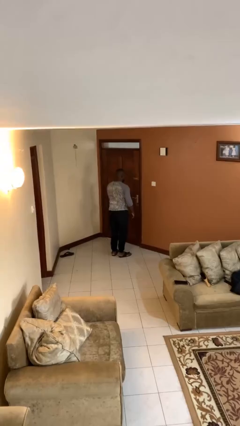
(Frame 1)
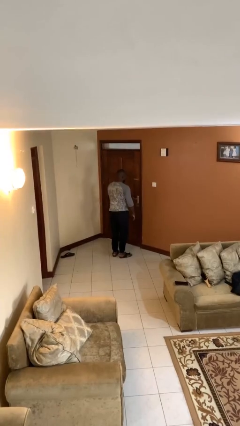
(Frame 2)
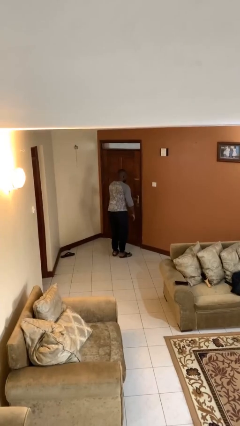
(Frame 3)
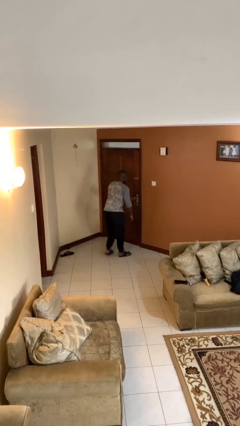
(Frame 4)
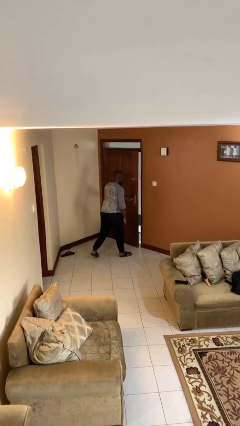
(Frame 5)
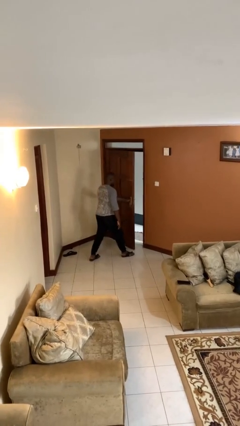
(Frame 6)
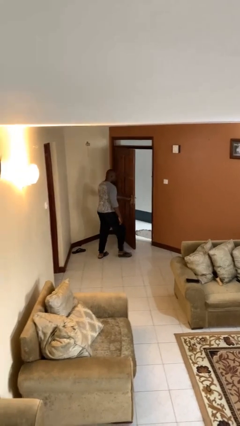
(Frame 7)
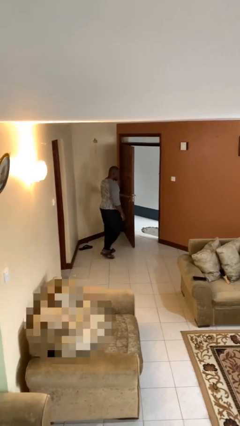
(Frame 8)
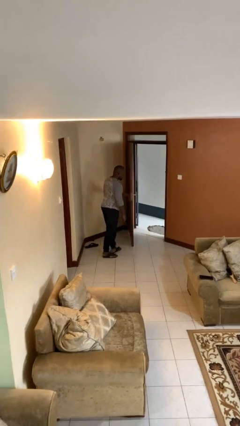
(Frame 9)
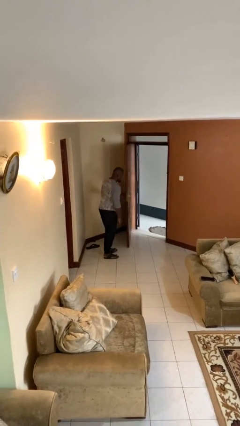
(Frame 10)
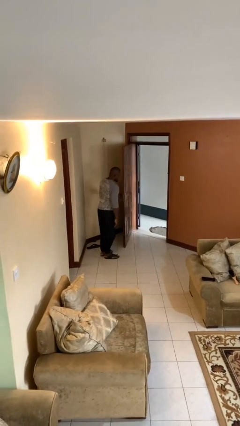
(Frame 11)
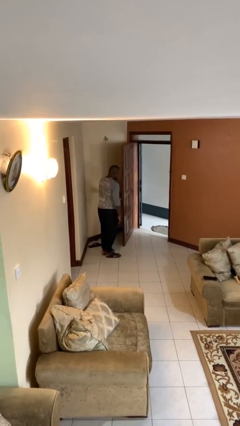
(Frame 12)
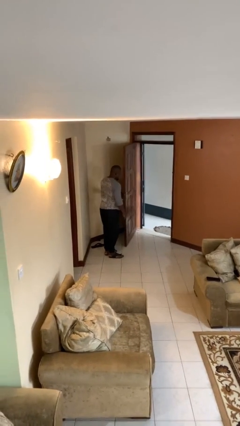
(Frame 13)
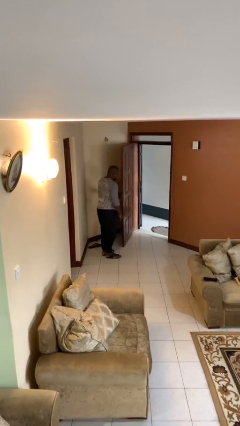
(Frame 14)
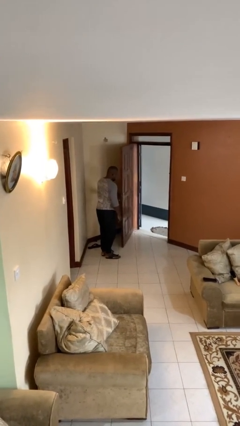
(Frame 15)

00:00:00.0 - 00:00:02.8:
person opens facility door

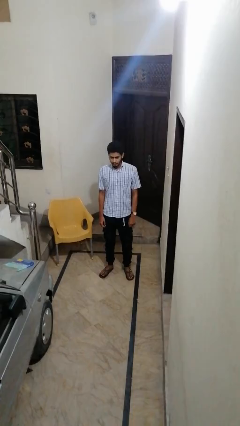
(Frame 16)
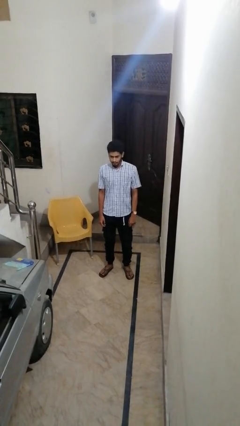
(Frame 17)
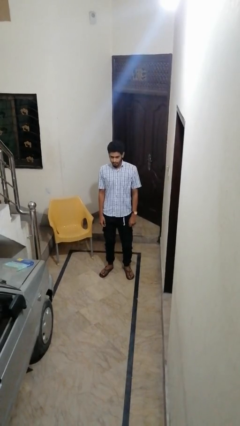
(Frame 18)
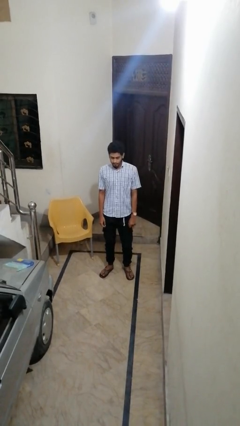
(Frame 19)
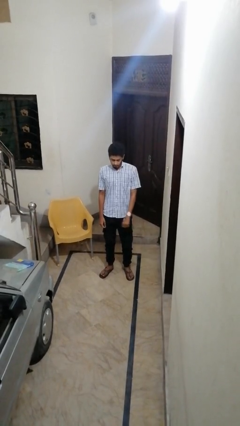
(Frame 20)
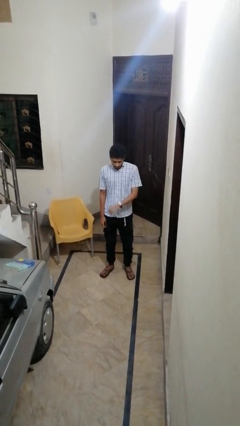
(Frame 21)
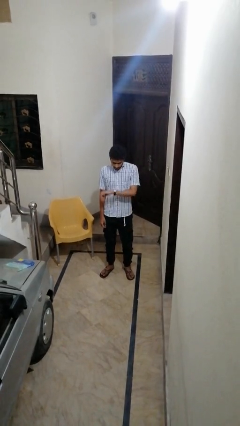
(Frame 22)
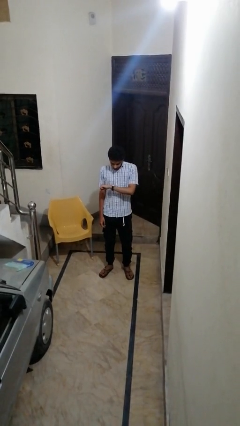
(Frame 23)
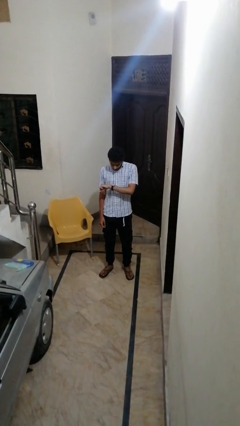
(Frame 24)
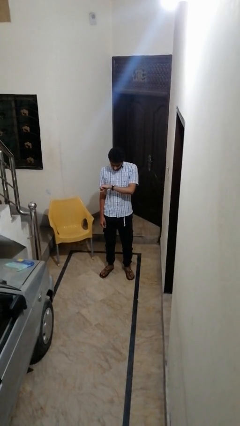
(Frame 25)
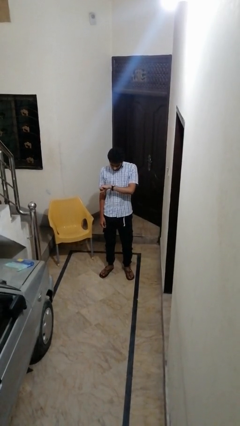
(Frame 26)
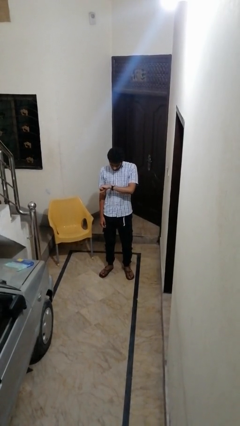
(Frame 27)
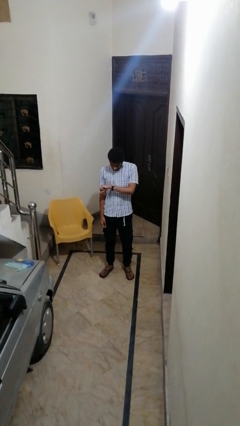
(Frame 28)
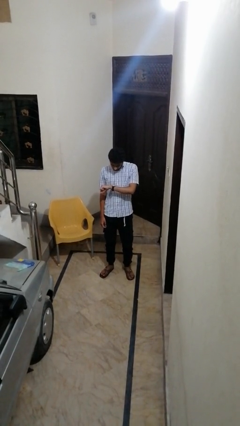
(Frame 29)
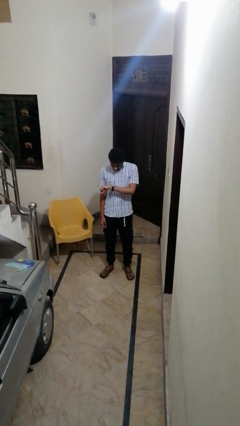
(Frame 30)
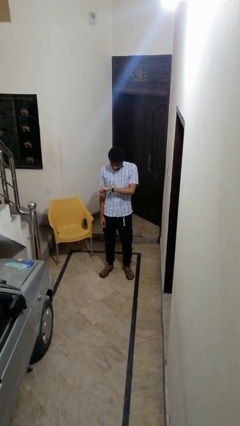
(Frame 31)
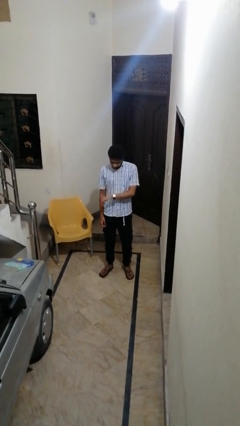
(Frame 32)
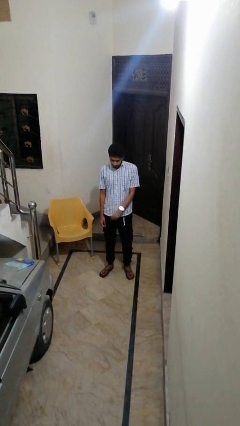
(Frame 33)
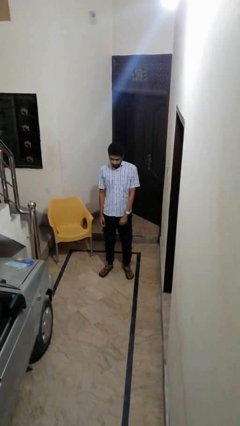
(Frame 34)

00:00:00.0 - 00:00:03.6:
person looks at wristwatch

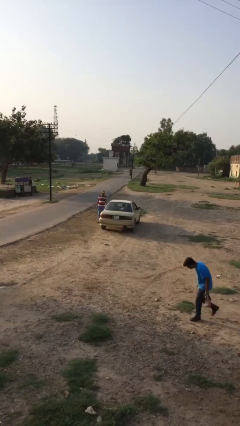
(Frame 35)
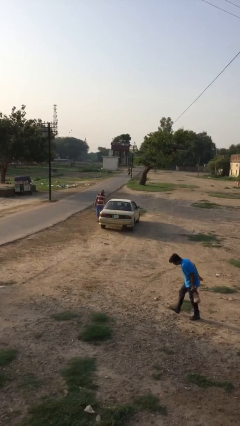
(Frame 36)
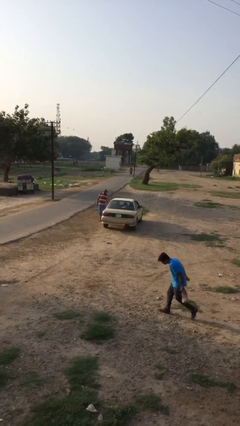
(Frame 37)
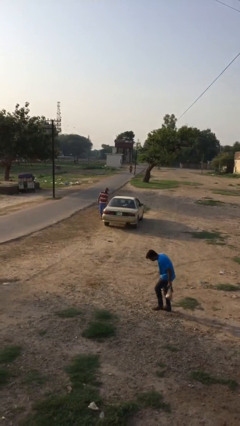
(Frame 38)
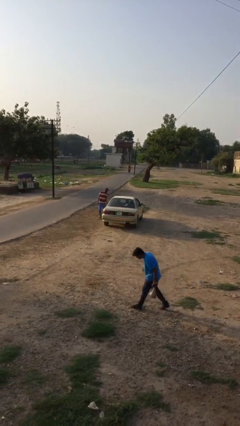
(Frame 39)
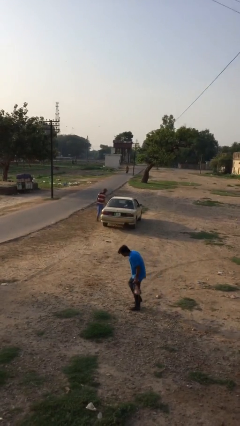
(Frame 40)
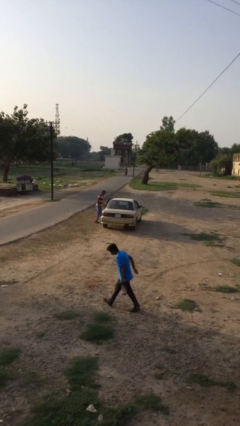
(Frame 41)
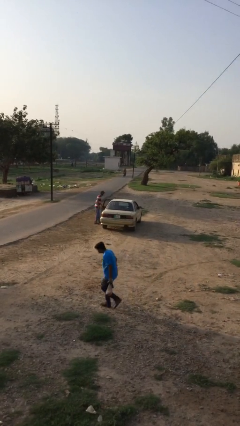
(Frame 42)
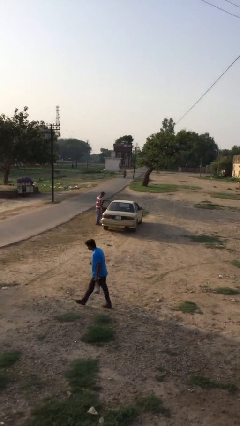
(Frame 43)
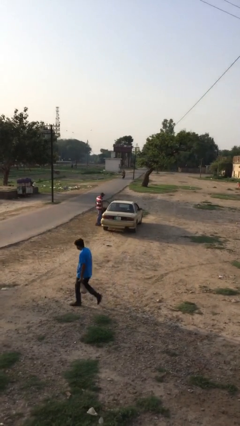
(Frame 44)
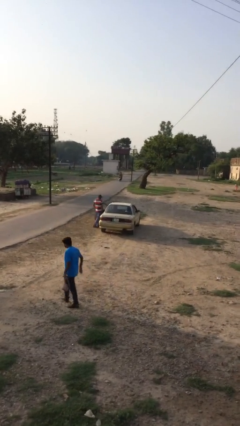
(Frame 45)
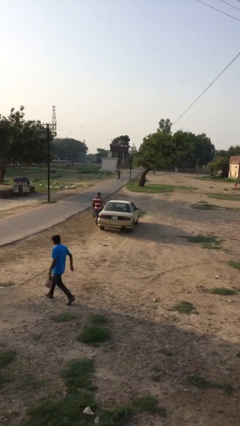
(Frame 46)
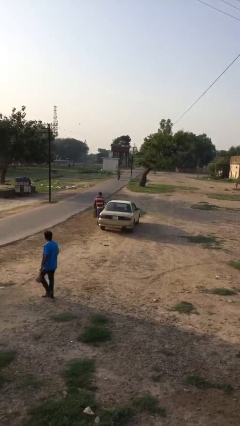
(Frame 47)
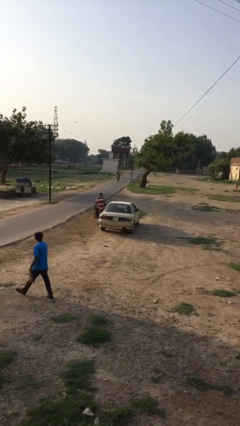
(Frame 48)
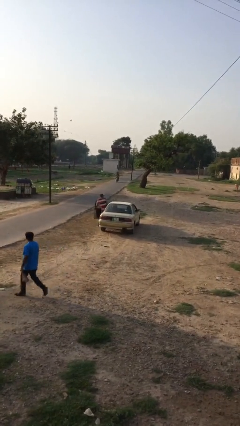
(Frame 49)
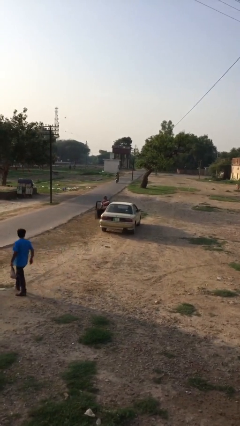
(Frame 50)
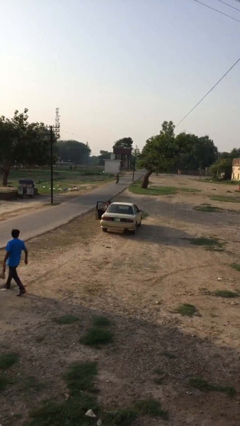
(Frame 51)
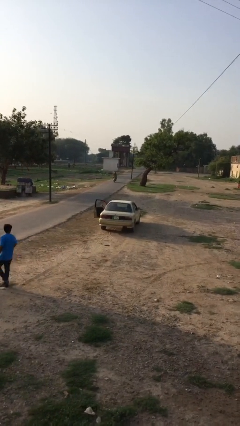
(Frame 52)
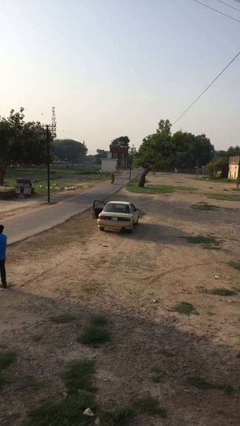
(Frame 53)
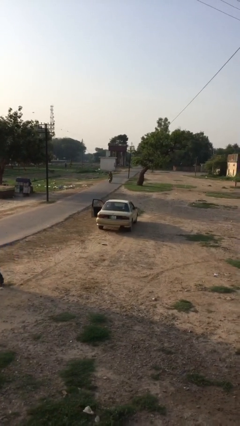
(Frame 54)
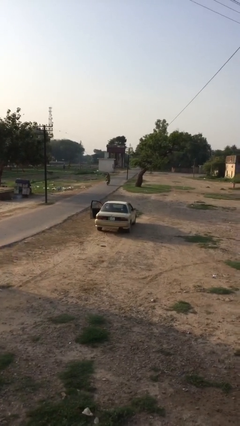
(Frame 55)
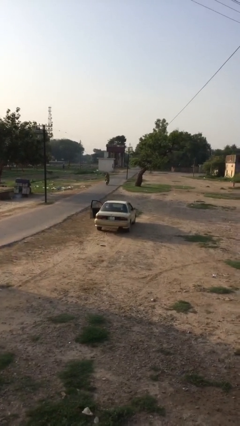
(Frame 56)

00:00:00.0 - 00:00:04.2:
car picks up person

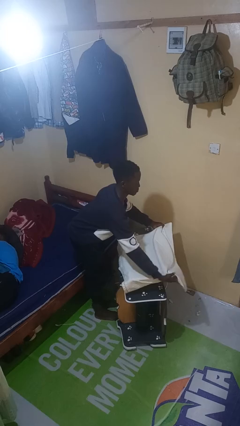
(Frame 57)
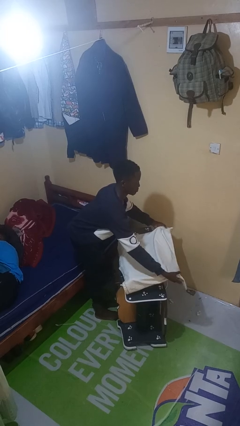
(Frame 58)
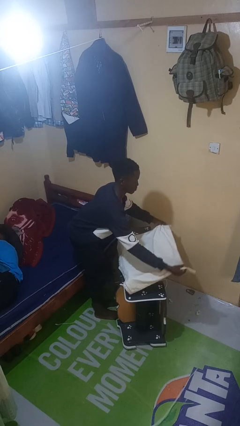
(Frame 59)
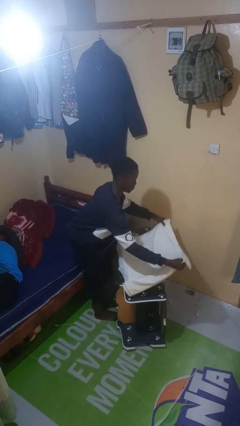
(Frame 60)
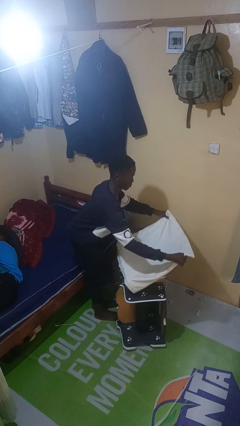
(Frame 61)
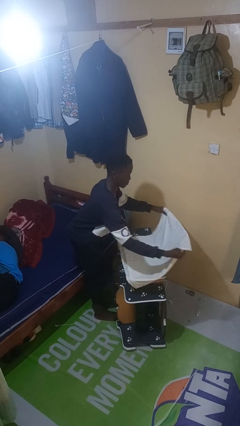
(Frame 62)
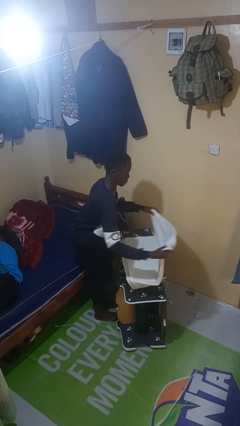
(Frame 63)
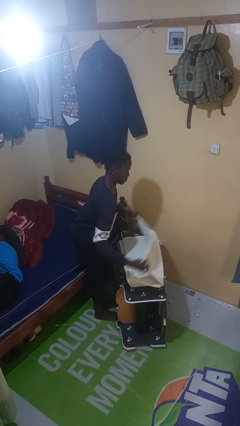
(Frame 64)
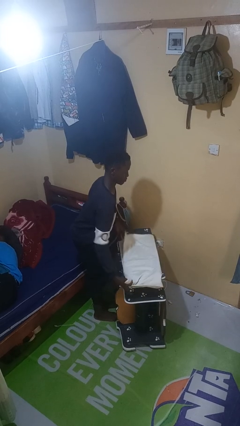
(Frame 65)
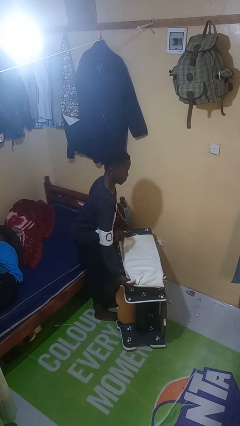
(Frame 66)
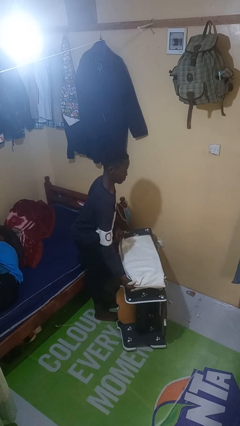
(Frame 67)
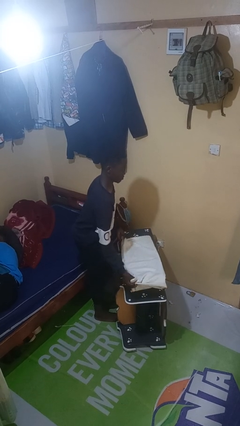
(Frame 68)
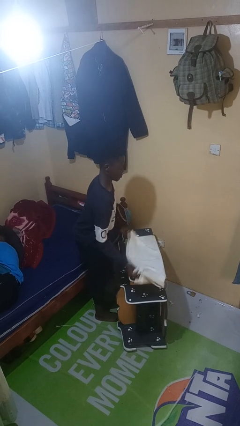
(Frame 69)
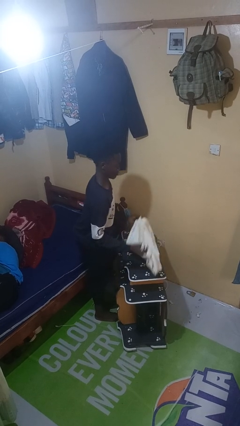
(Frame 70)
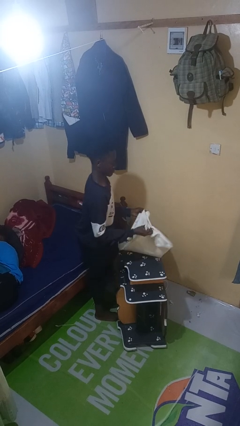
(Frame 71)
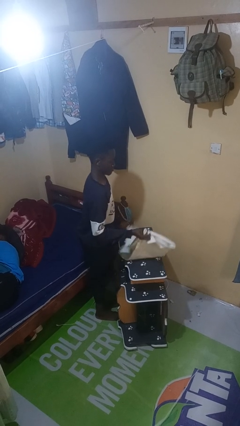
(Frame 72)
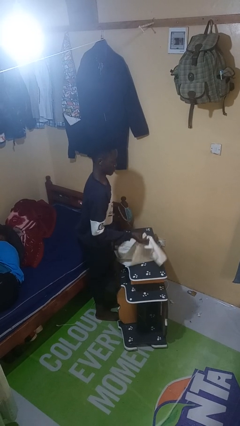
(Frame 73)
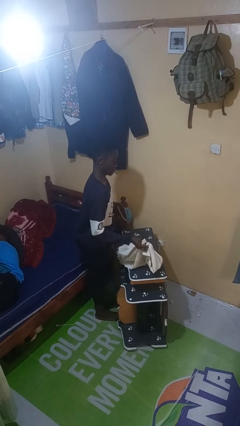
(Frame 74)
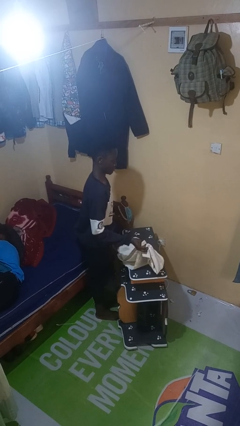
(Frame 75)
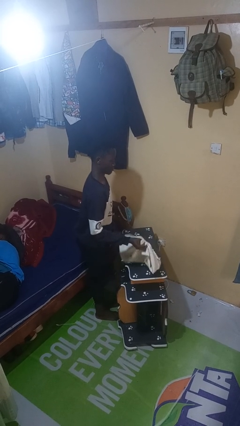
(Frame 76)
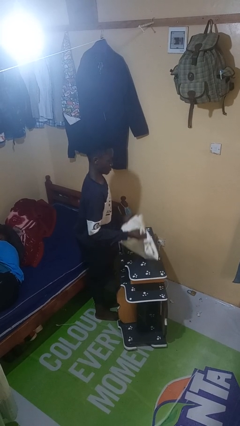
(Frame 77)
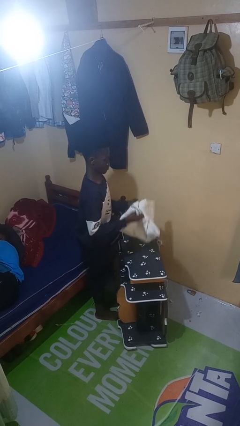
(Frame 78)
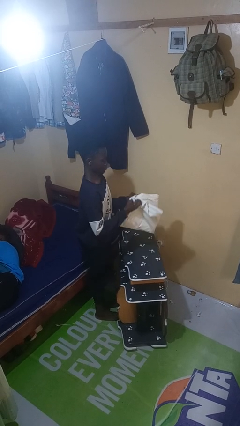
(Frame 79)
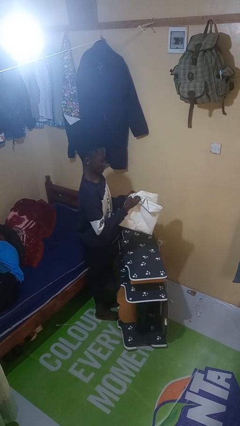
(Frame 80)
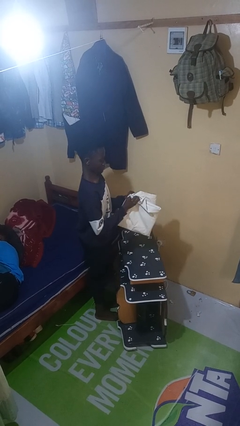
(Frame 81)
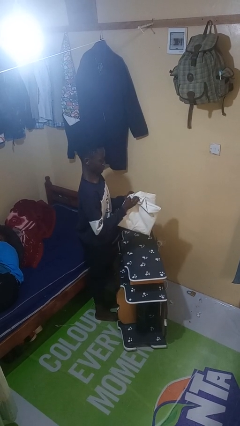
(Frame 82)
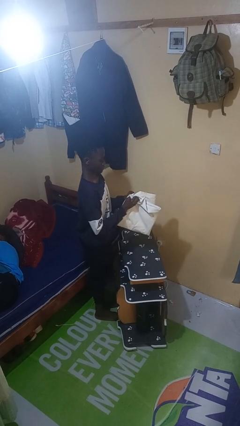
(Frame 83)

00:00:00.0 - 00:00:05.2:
person folds tablecloth

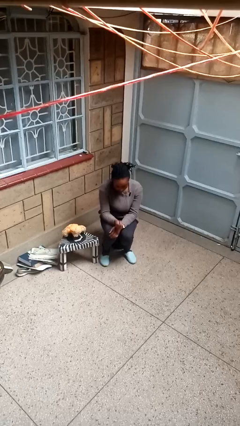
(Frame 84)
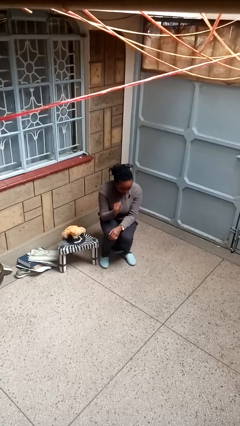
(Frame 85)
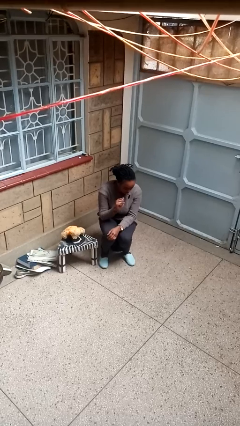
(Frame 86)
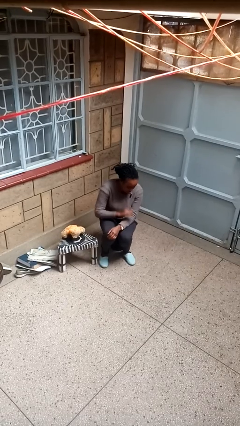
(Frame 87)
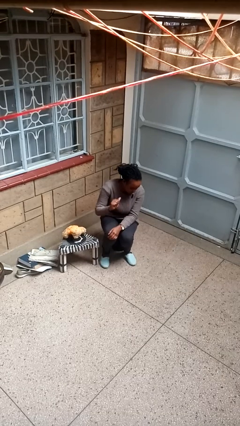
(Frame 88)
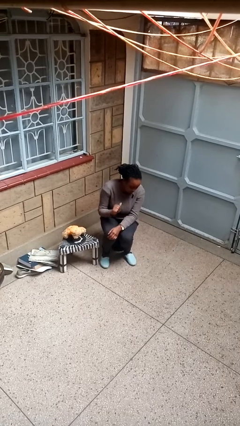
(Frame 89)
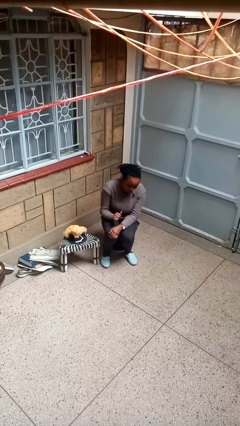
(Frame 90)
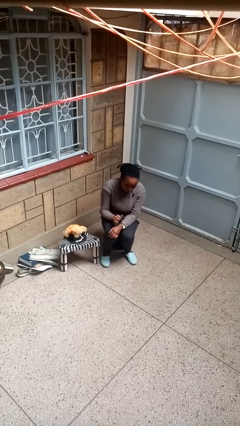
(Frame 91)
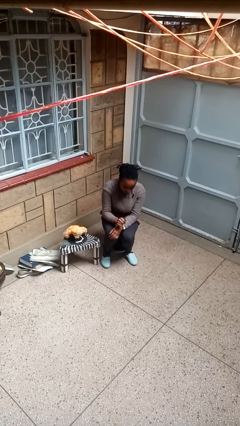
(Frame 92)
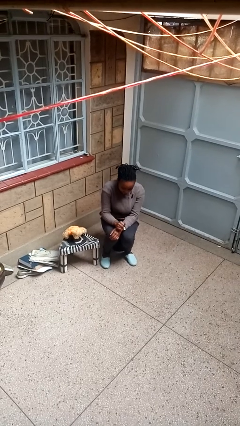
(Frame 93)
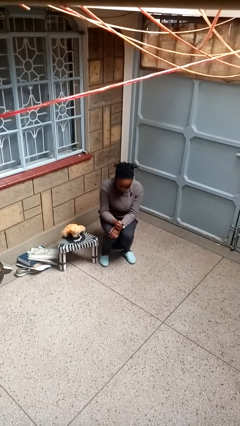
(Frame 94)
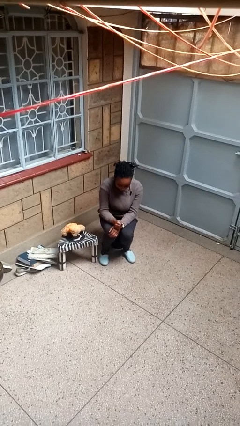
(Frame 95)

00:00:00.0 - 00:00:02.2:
person swats bug
